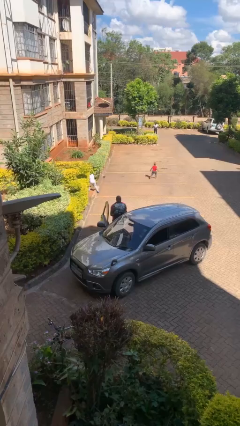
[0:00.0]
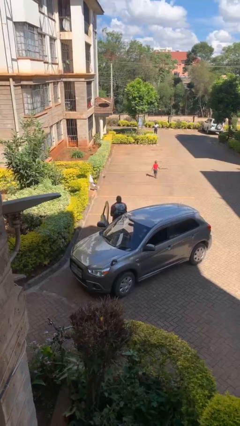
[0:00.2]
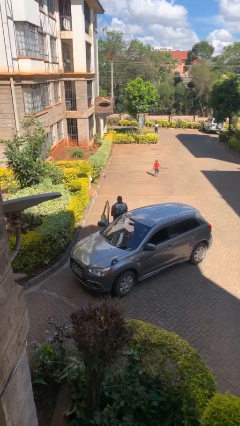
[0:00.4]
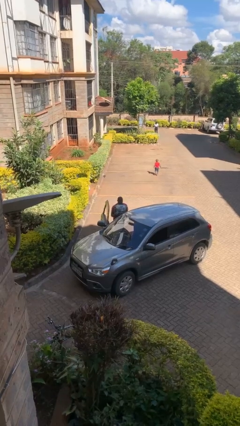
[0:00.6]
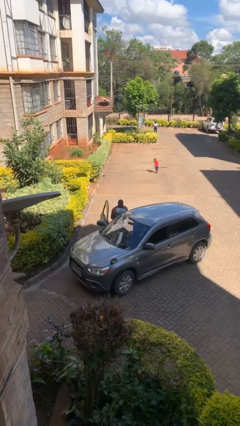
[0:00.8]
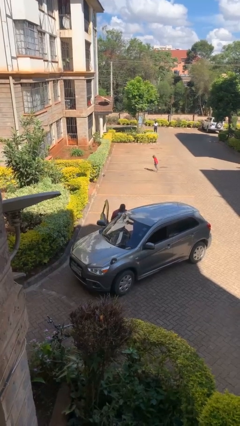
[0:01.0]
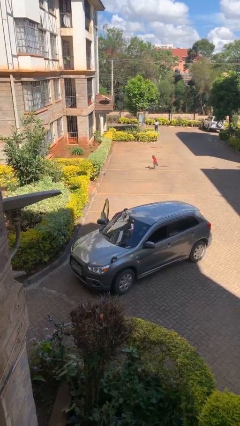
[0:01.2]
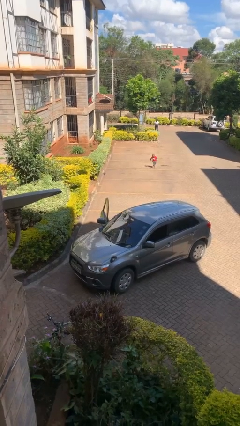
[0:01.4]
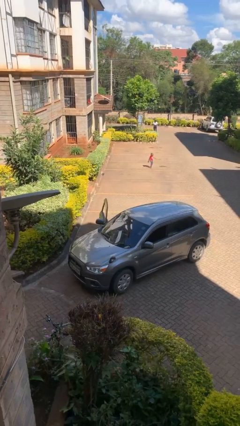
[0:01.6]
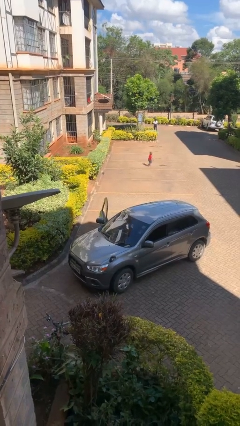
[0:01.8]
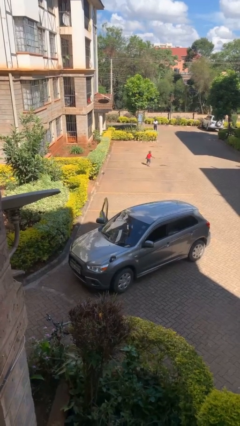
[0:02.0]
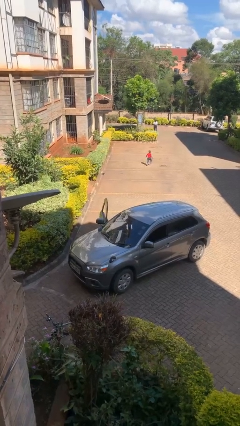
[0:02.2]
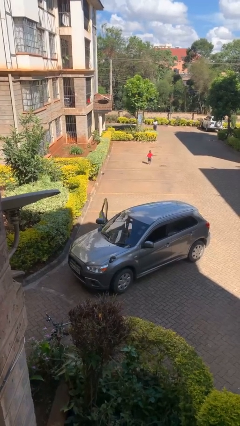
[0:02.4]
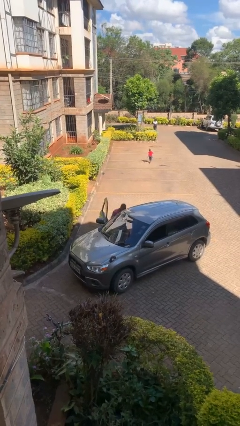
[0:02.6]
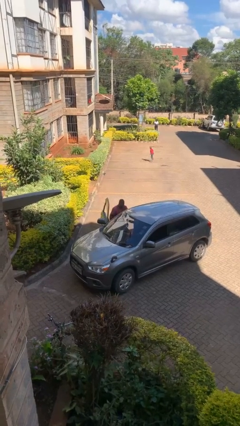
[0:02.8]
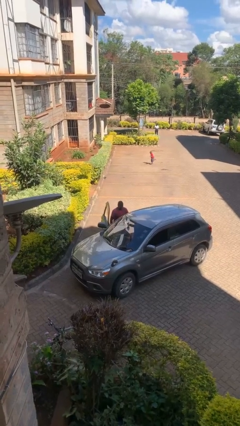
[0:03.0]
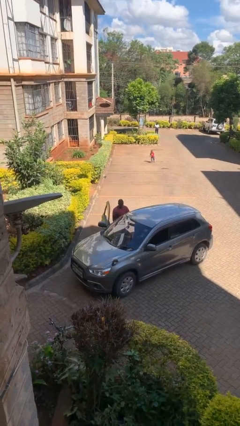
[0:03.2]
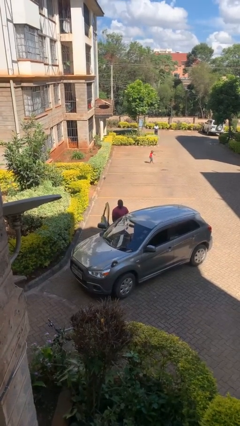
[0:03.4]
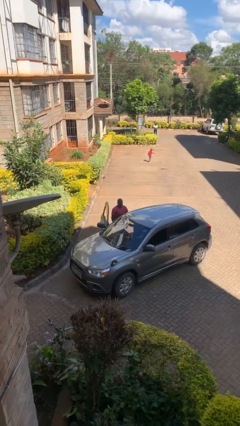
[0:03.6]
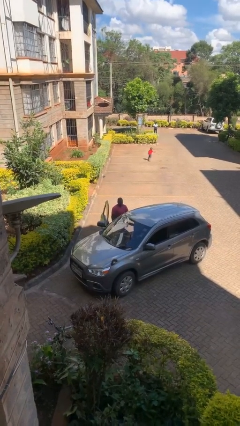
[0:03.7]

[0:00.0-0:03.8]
person loads car

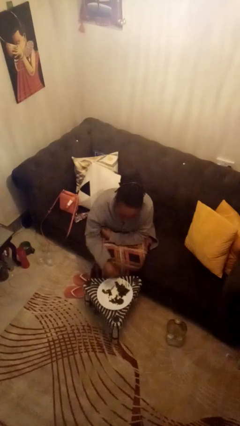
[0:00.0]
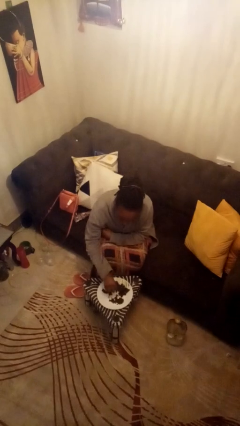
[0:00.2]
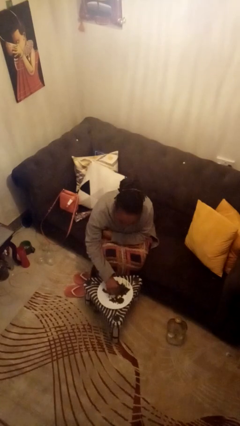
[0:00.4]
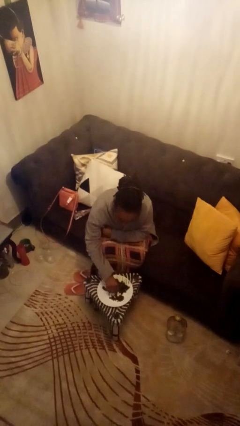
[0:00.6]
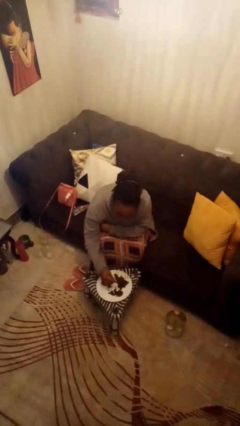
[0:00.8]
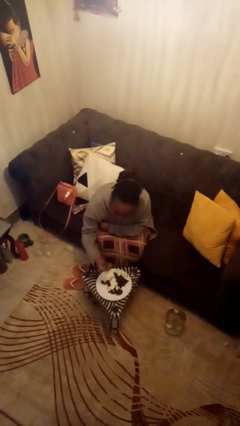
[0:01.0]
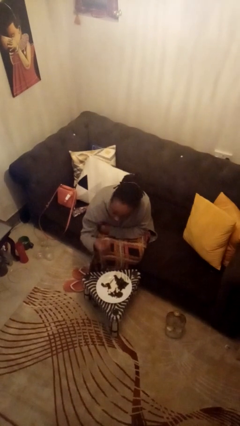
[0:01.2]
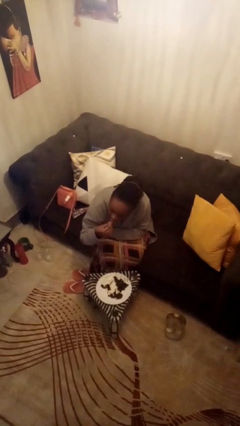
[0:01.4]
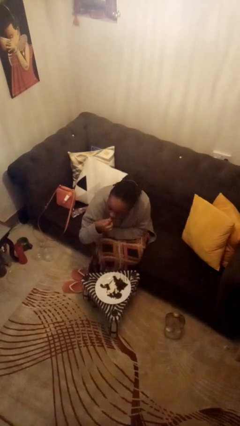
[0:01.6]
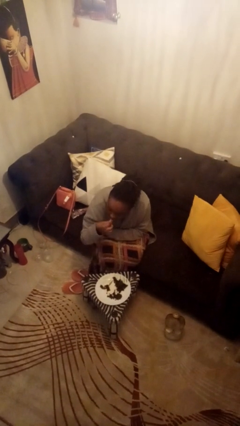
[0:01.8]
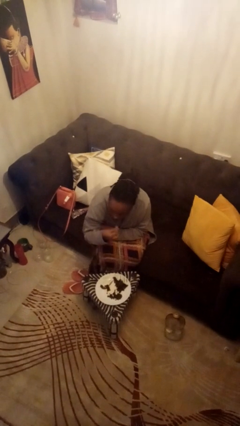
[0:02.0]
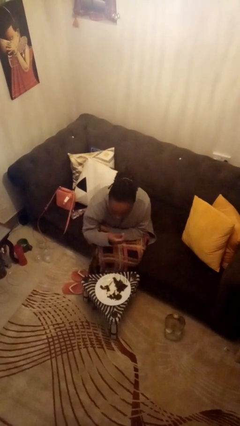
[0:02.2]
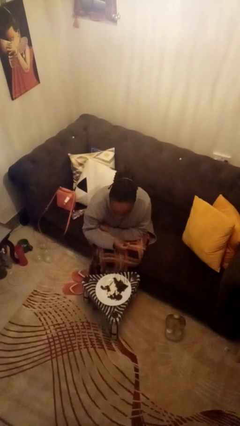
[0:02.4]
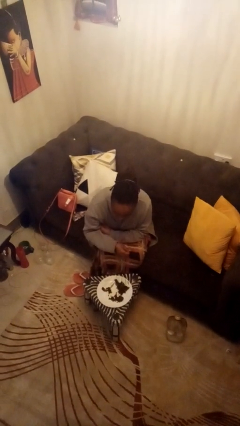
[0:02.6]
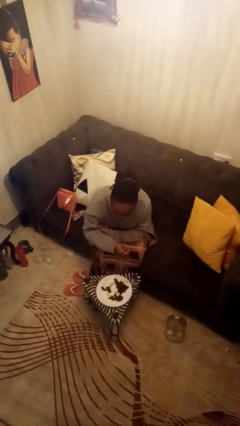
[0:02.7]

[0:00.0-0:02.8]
person eats with hands

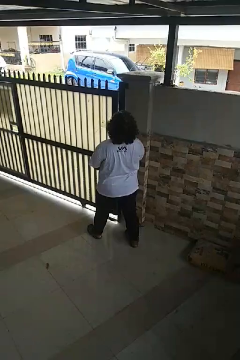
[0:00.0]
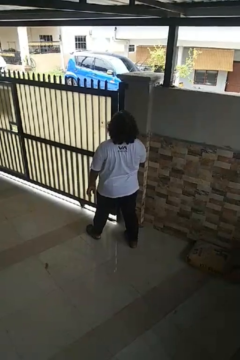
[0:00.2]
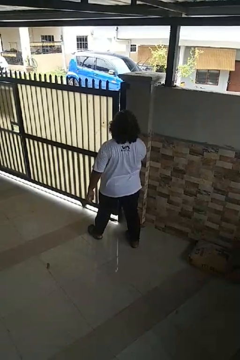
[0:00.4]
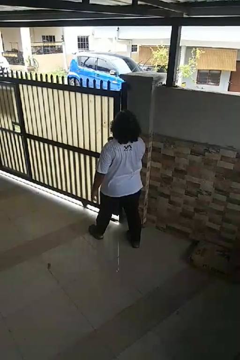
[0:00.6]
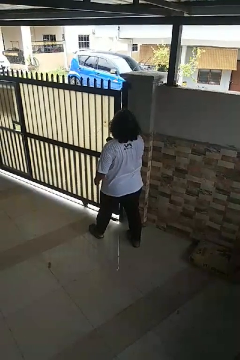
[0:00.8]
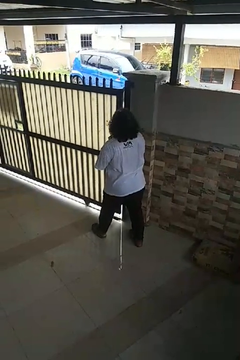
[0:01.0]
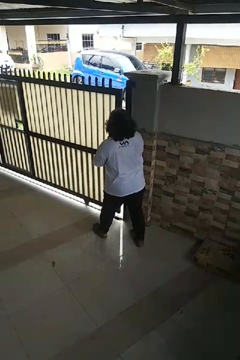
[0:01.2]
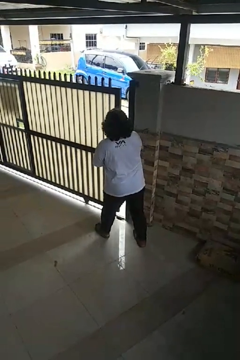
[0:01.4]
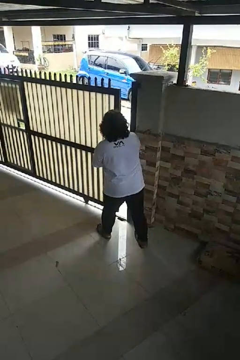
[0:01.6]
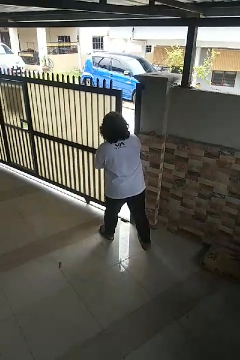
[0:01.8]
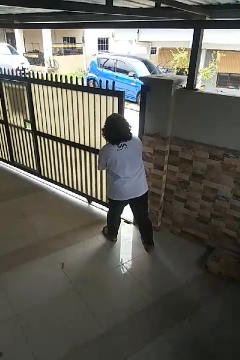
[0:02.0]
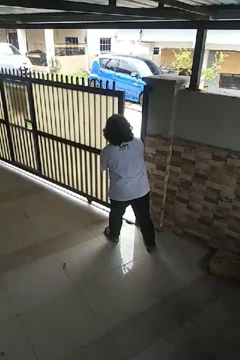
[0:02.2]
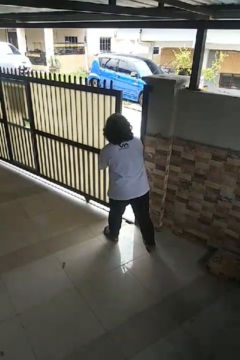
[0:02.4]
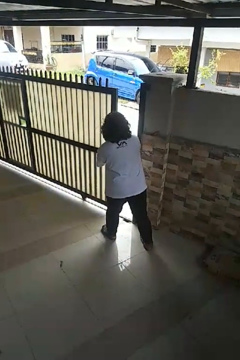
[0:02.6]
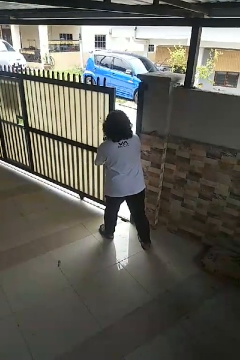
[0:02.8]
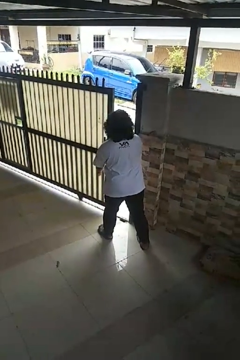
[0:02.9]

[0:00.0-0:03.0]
person opens sliding door

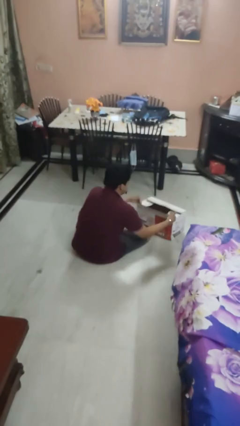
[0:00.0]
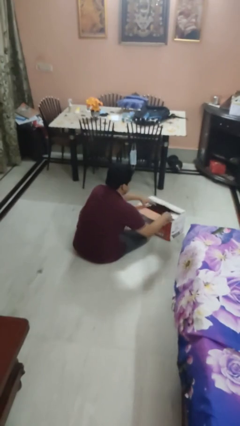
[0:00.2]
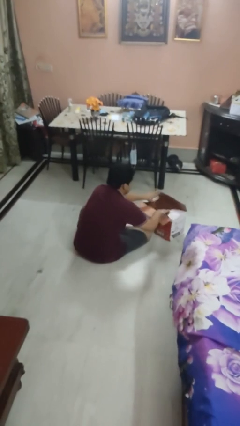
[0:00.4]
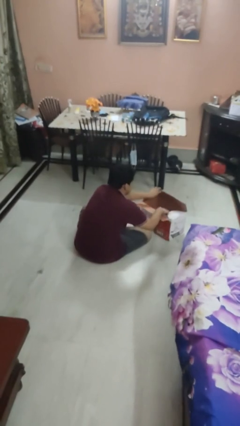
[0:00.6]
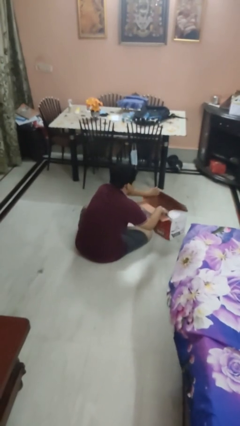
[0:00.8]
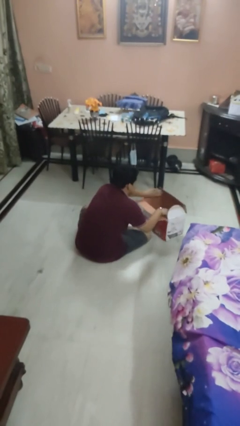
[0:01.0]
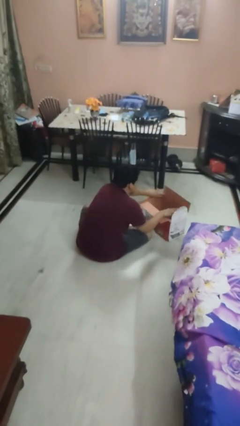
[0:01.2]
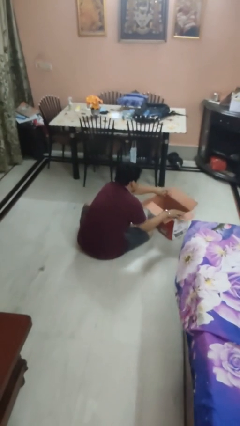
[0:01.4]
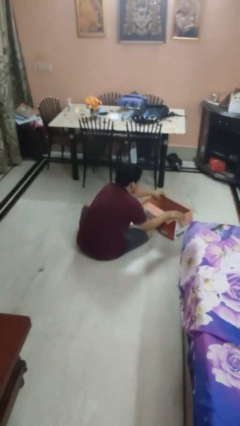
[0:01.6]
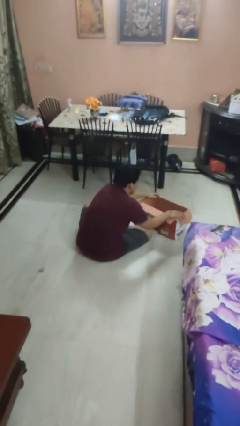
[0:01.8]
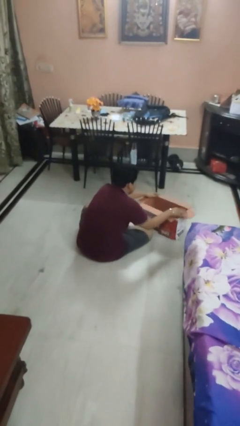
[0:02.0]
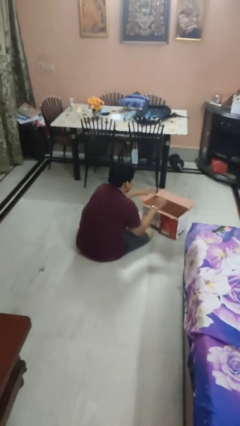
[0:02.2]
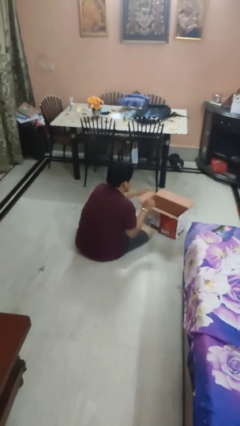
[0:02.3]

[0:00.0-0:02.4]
person opens box

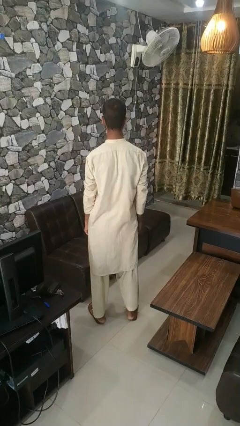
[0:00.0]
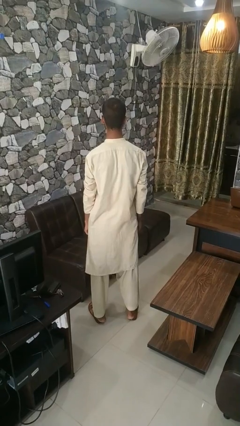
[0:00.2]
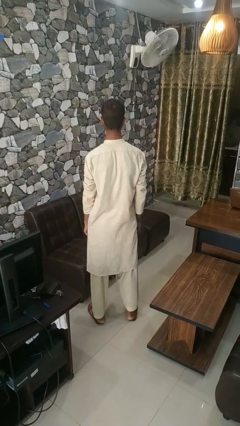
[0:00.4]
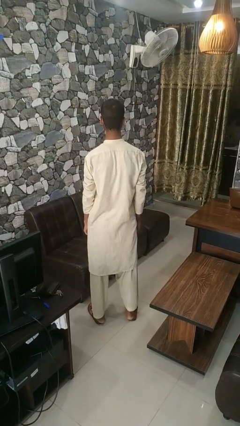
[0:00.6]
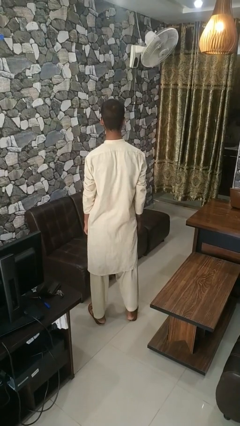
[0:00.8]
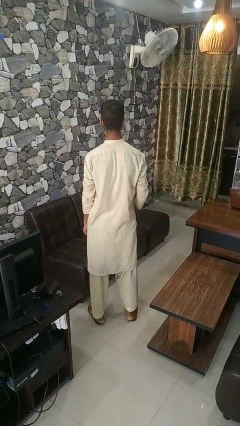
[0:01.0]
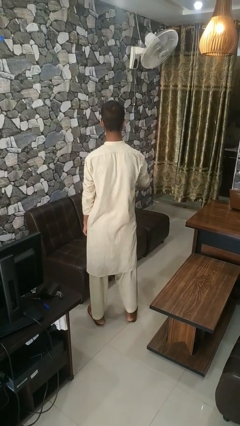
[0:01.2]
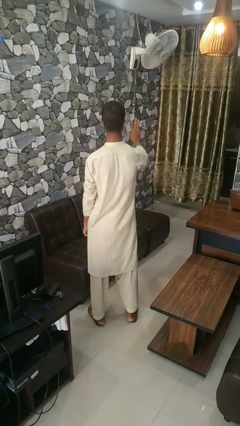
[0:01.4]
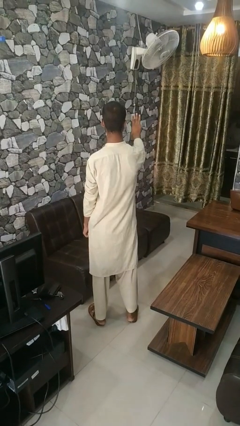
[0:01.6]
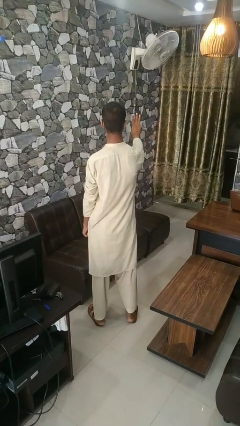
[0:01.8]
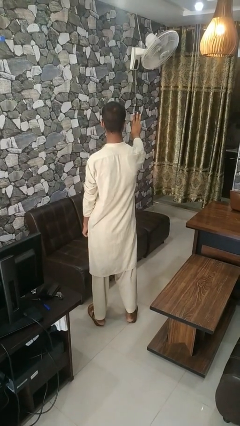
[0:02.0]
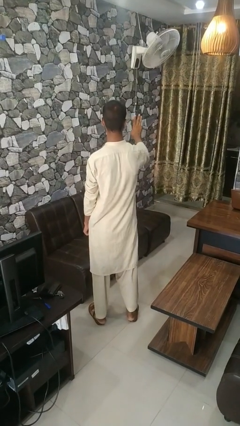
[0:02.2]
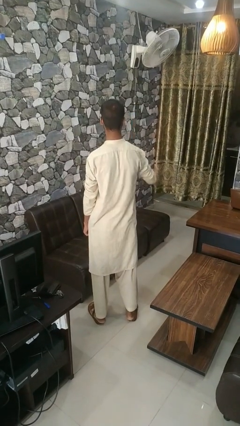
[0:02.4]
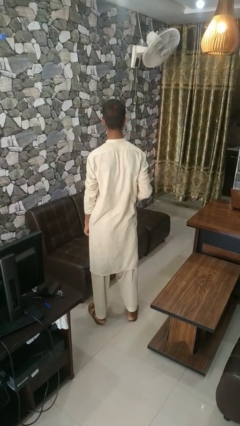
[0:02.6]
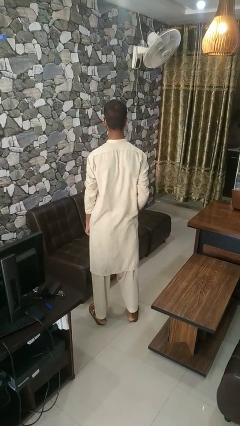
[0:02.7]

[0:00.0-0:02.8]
person gestures number three

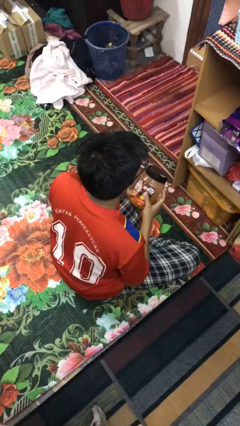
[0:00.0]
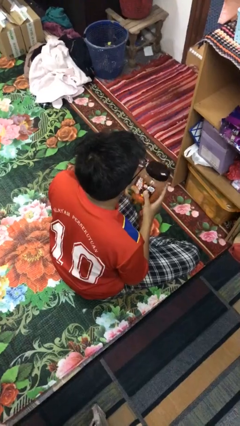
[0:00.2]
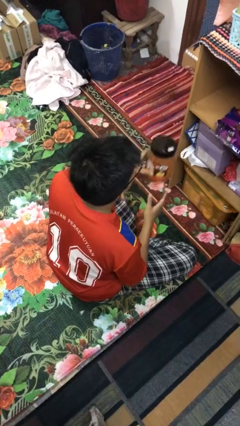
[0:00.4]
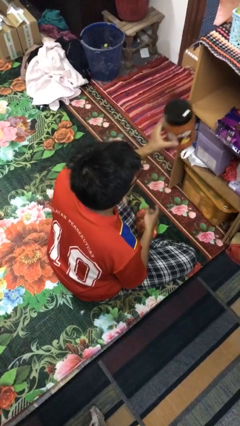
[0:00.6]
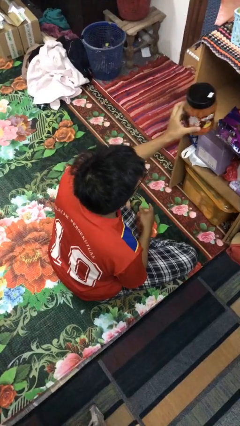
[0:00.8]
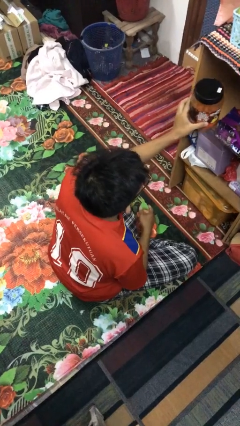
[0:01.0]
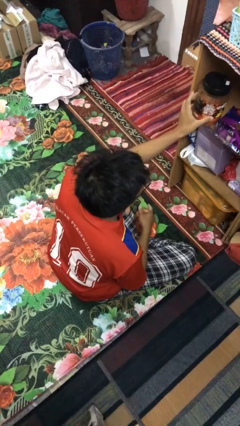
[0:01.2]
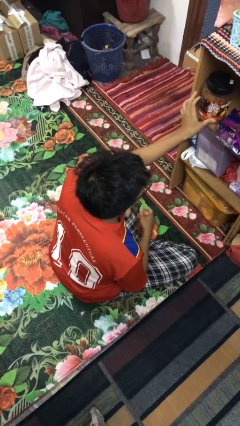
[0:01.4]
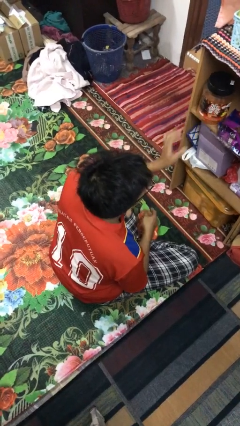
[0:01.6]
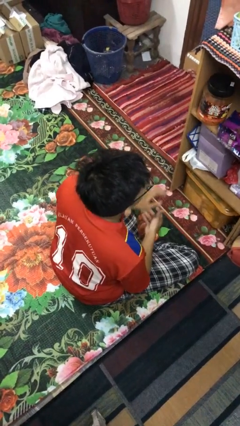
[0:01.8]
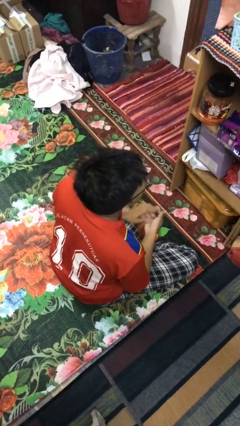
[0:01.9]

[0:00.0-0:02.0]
person puts down object into cabinet

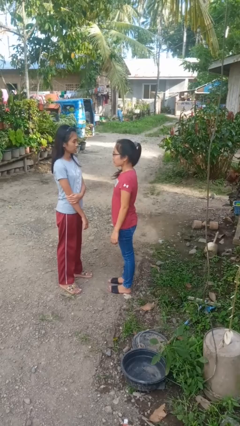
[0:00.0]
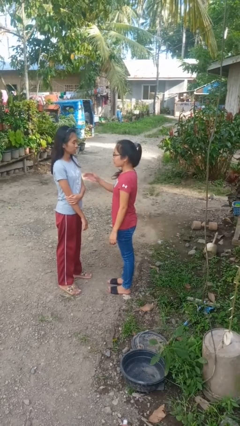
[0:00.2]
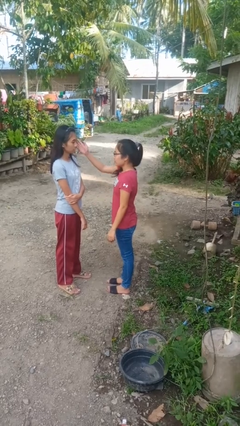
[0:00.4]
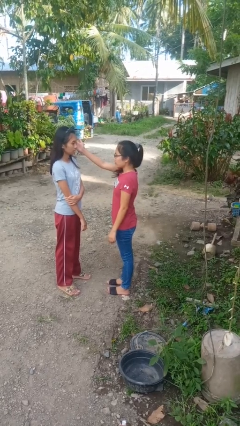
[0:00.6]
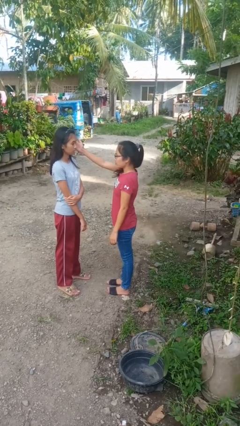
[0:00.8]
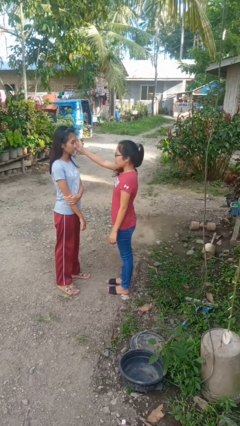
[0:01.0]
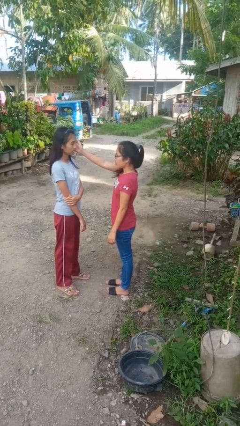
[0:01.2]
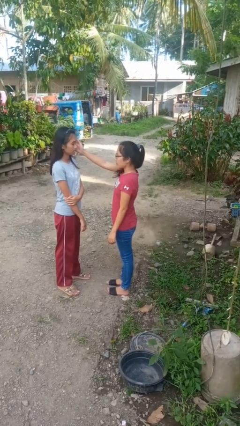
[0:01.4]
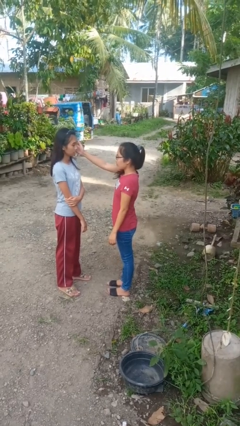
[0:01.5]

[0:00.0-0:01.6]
person touches face of person
